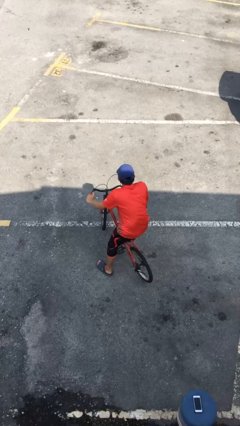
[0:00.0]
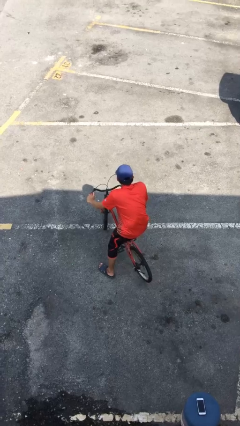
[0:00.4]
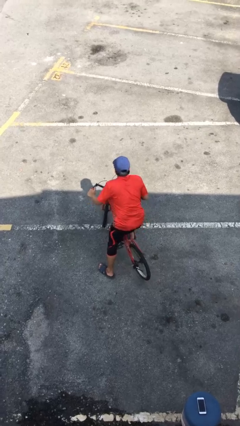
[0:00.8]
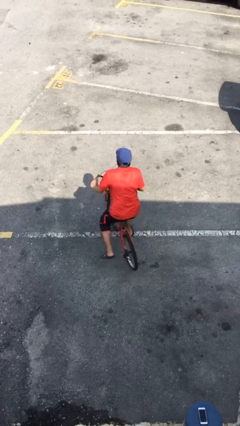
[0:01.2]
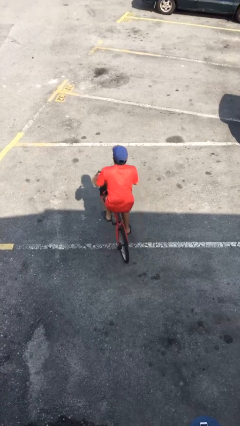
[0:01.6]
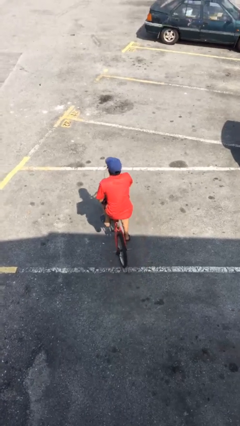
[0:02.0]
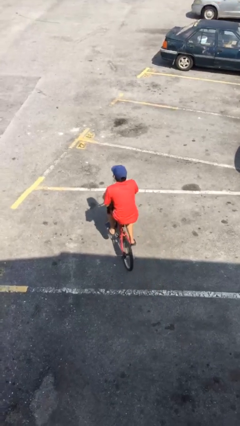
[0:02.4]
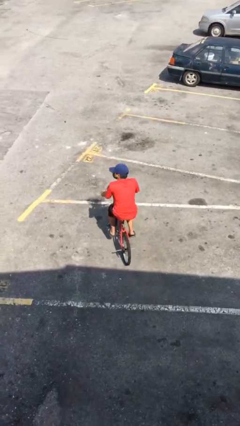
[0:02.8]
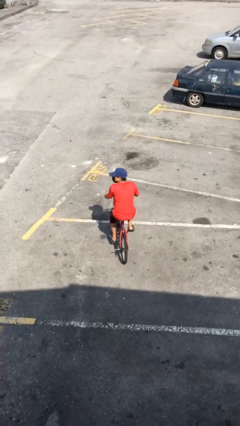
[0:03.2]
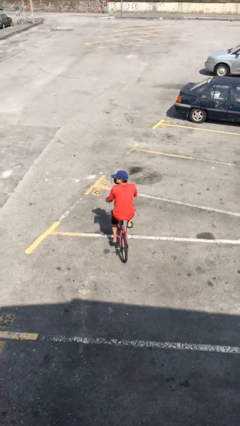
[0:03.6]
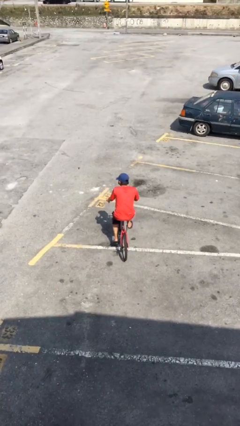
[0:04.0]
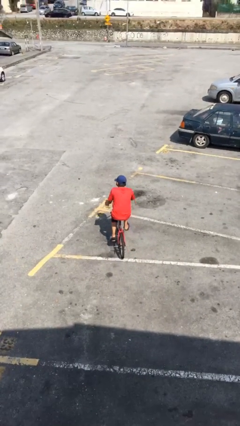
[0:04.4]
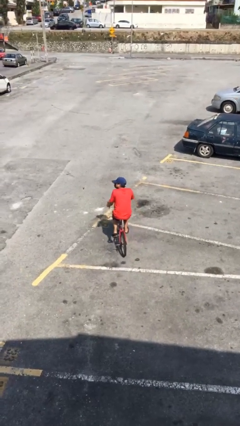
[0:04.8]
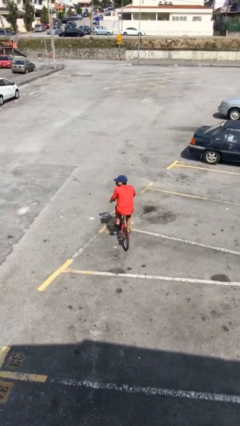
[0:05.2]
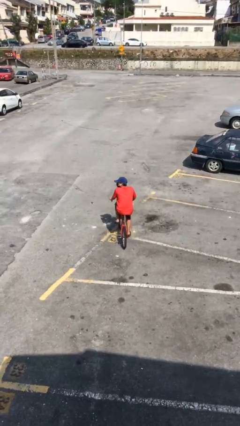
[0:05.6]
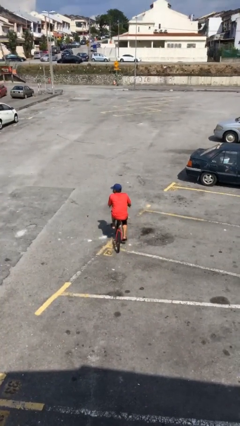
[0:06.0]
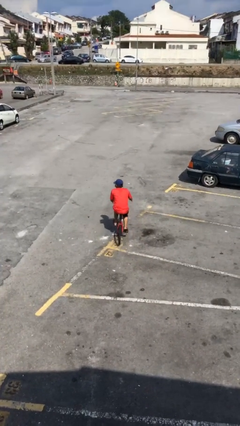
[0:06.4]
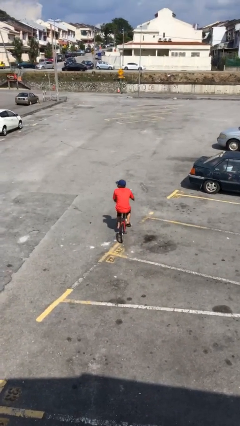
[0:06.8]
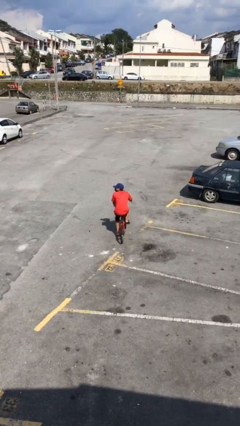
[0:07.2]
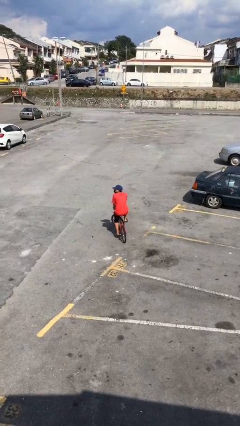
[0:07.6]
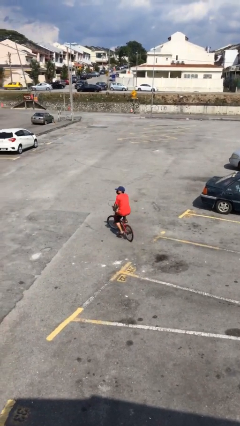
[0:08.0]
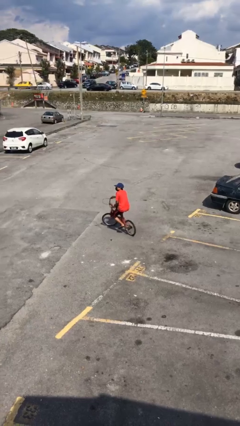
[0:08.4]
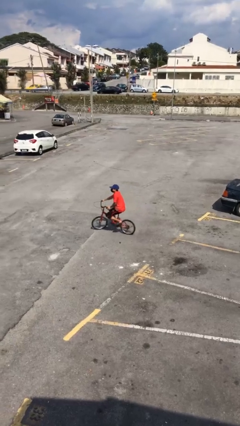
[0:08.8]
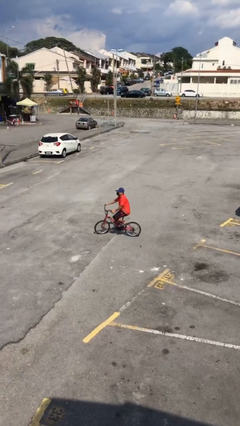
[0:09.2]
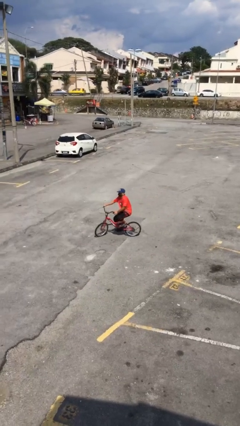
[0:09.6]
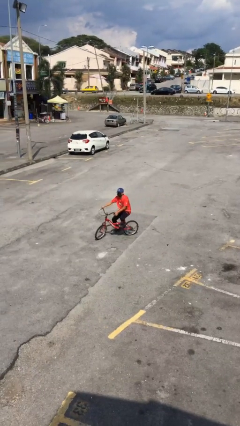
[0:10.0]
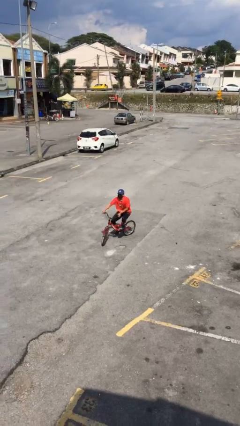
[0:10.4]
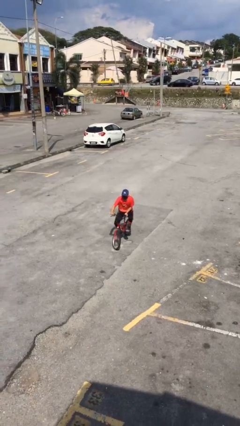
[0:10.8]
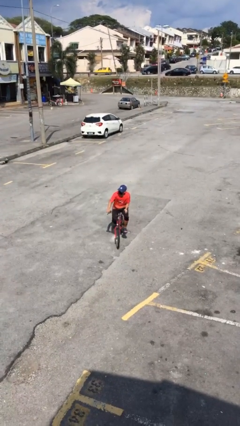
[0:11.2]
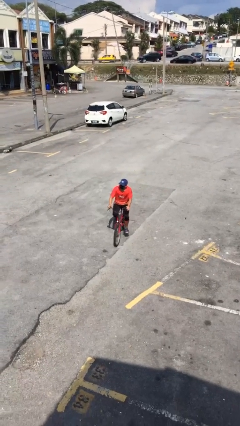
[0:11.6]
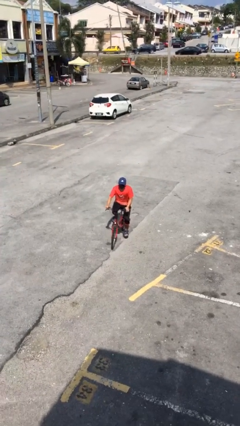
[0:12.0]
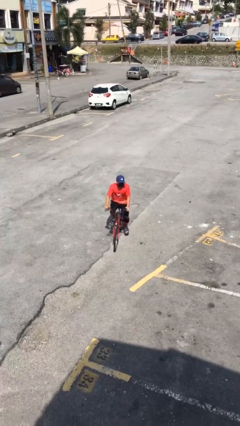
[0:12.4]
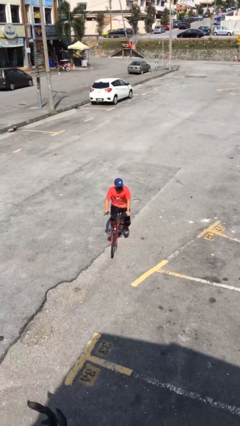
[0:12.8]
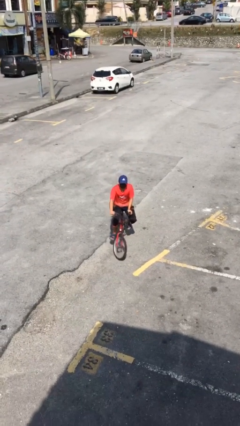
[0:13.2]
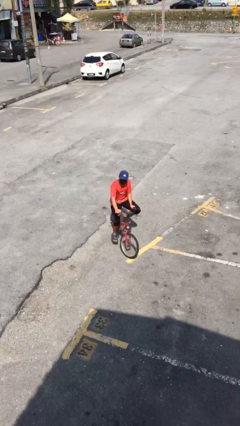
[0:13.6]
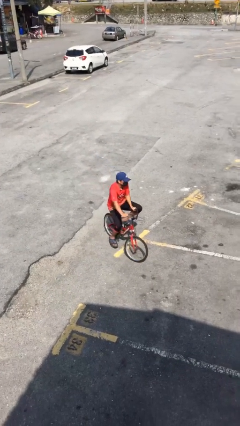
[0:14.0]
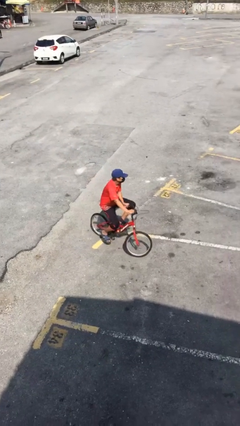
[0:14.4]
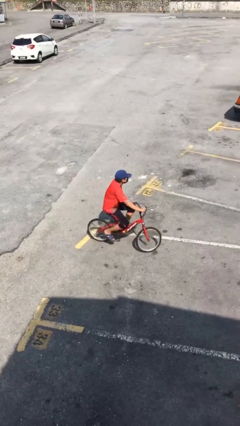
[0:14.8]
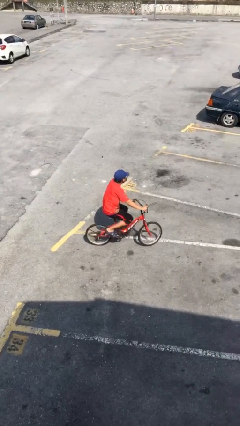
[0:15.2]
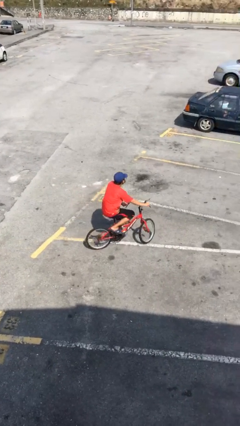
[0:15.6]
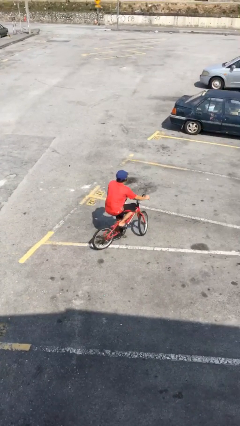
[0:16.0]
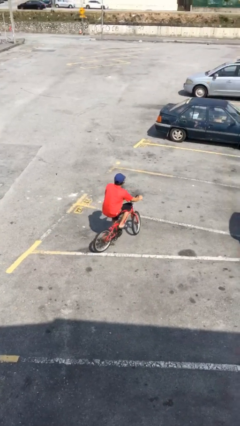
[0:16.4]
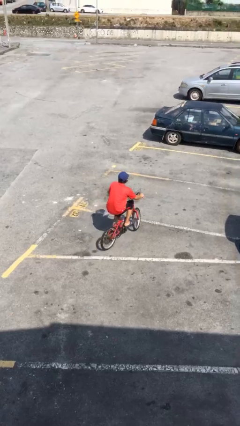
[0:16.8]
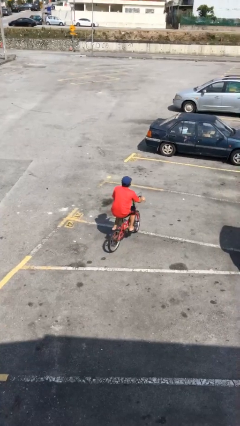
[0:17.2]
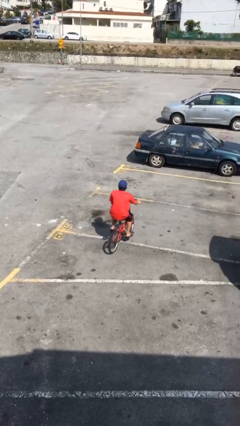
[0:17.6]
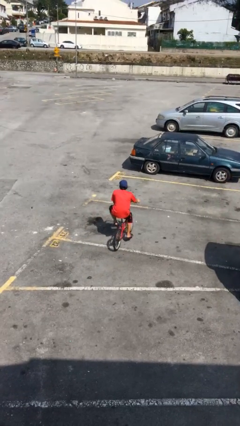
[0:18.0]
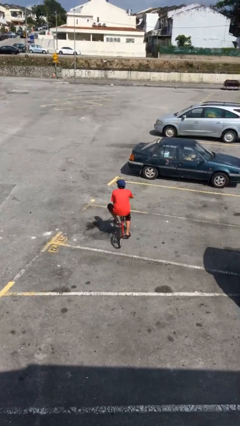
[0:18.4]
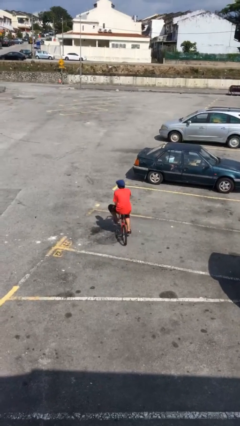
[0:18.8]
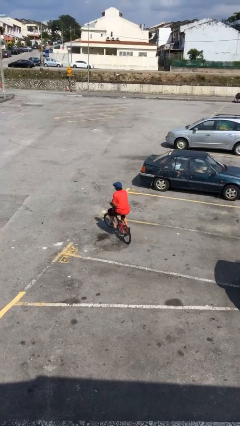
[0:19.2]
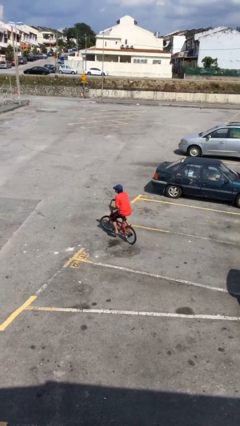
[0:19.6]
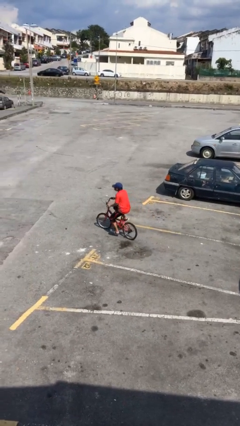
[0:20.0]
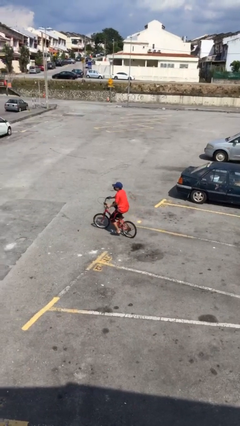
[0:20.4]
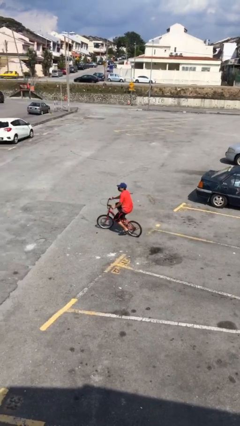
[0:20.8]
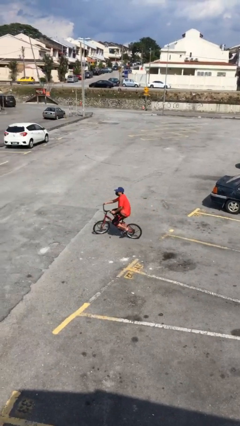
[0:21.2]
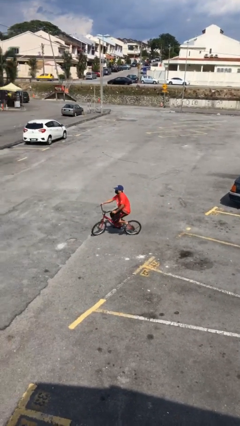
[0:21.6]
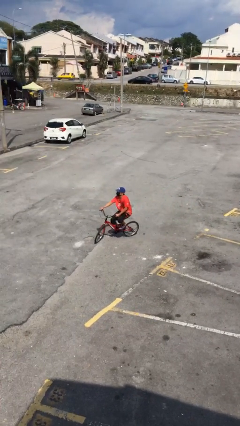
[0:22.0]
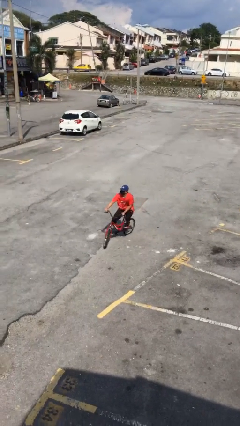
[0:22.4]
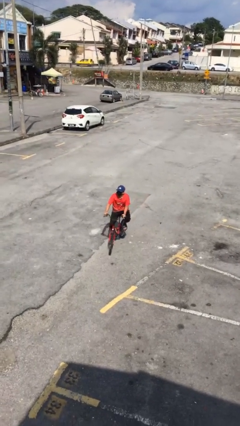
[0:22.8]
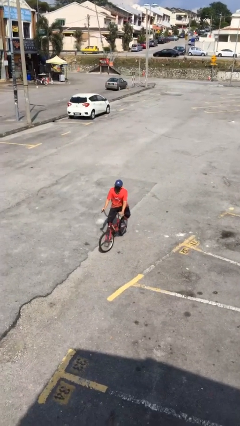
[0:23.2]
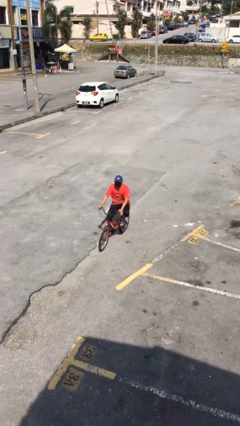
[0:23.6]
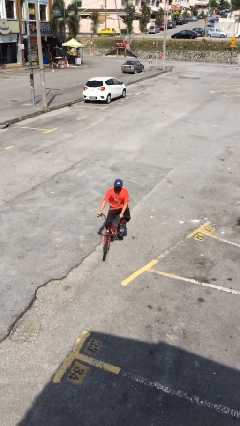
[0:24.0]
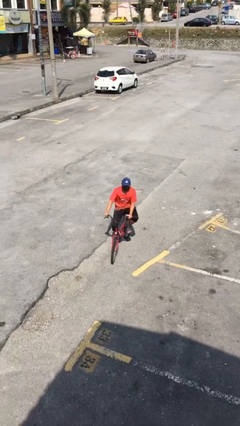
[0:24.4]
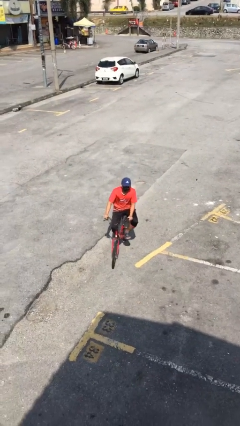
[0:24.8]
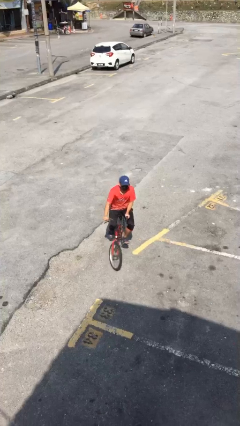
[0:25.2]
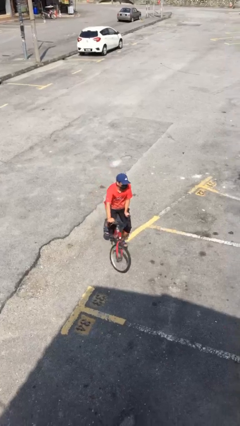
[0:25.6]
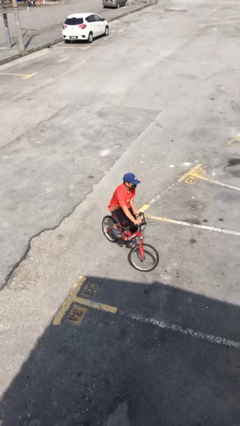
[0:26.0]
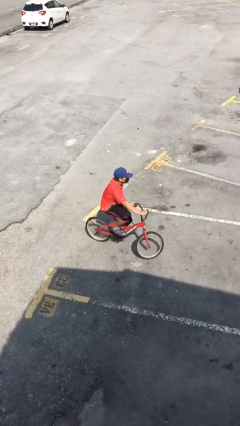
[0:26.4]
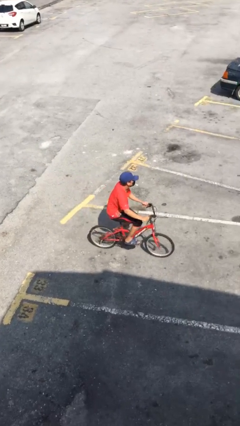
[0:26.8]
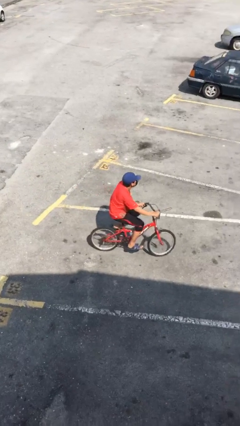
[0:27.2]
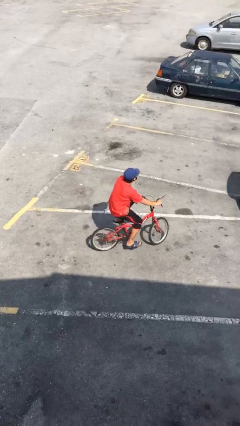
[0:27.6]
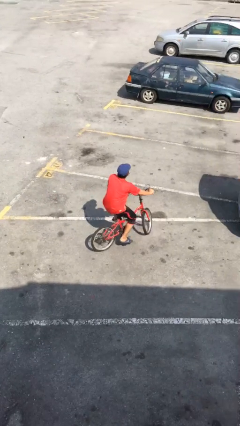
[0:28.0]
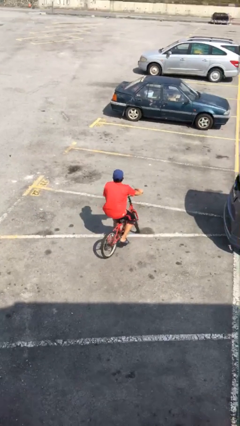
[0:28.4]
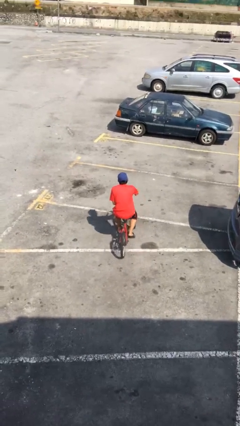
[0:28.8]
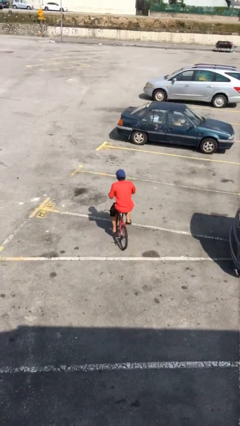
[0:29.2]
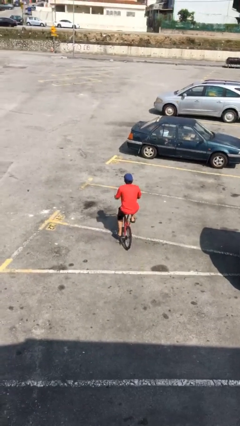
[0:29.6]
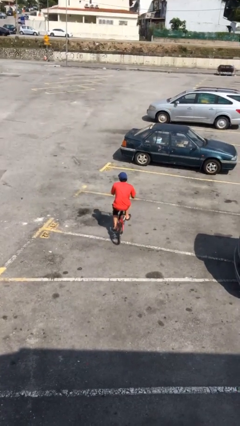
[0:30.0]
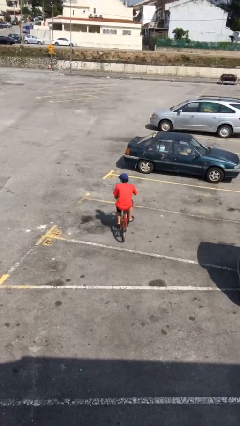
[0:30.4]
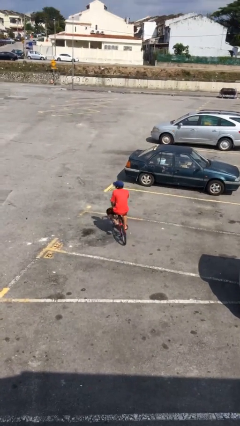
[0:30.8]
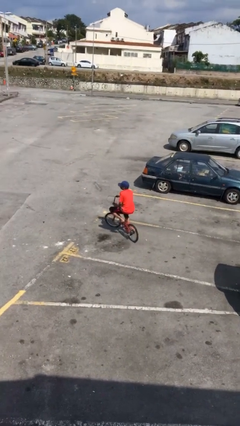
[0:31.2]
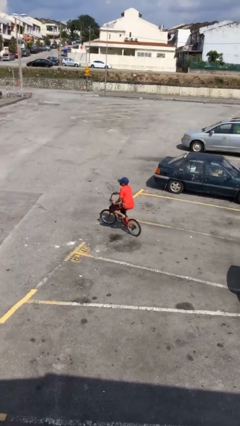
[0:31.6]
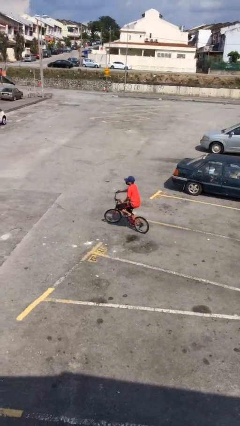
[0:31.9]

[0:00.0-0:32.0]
person rides bicycle

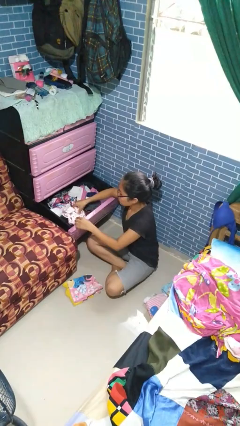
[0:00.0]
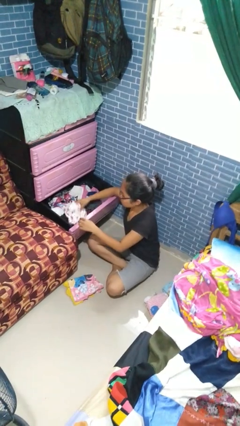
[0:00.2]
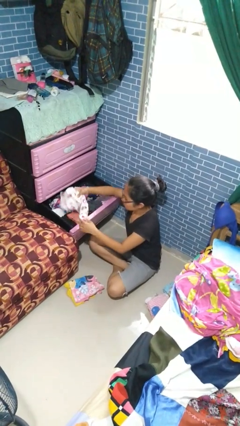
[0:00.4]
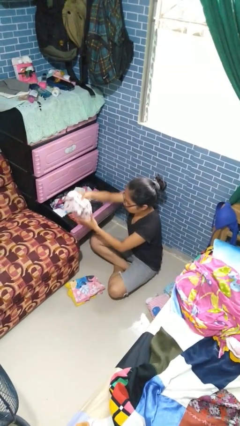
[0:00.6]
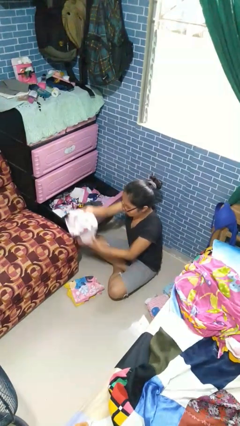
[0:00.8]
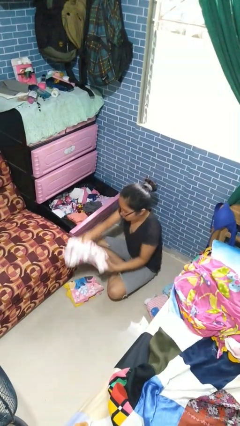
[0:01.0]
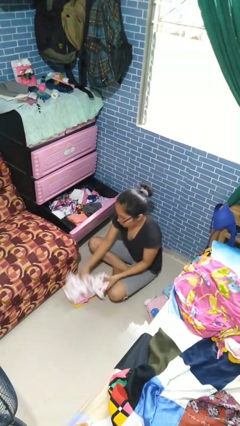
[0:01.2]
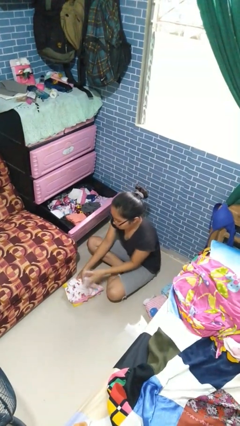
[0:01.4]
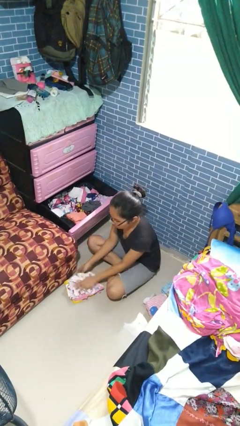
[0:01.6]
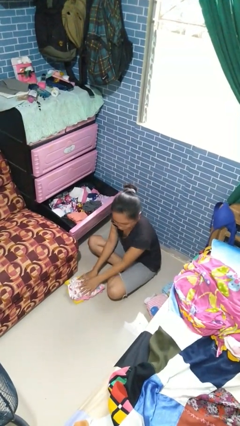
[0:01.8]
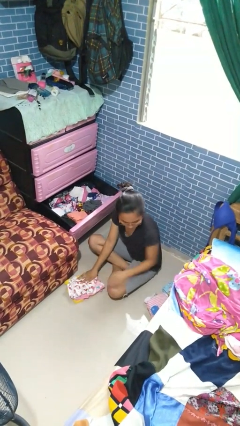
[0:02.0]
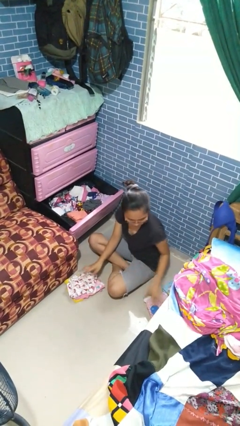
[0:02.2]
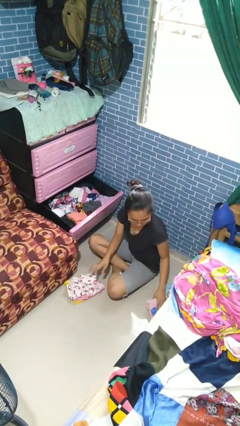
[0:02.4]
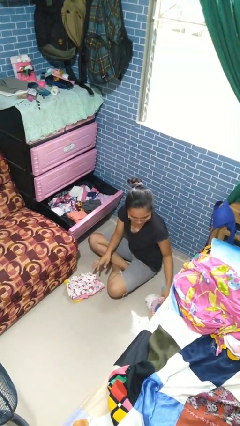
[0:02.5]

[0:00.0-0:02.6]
person takes clothes from dresser
